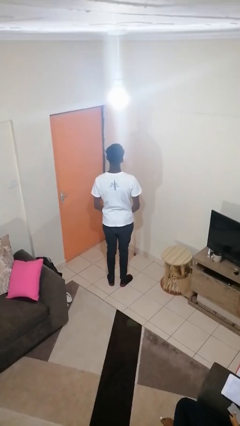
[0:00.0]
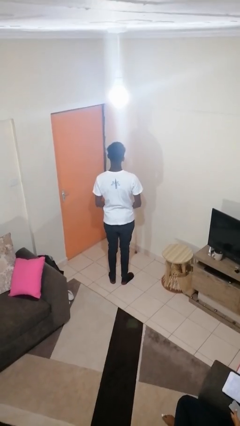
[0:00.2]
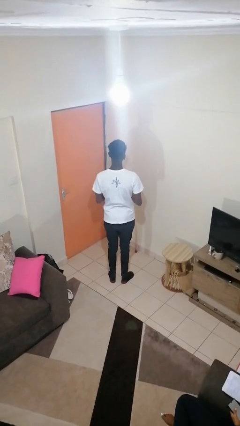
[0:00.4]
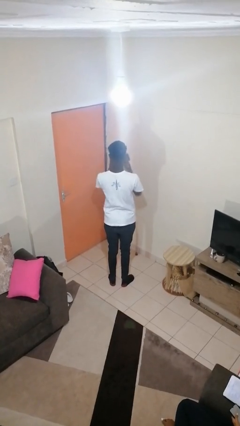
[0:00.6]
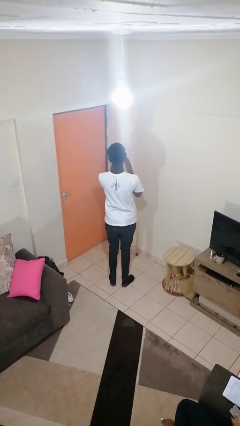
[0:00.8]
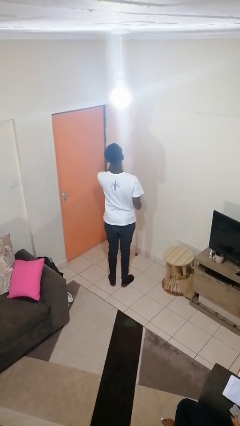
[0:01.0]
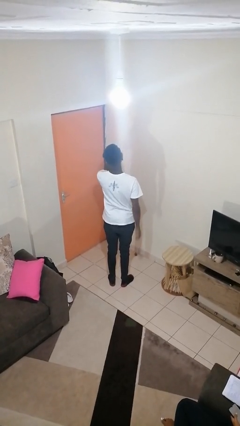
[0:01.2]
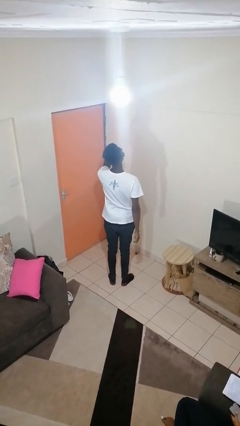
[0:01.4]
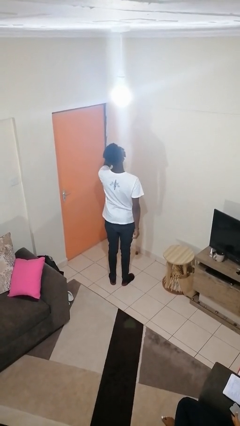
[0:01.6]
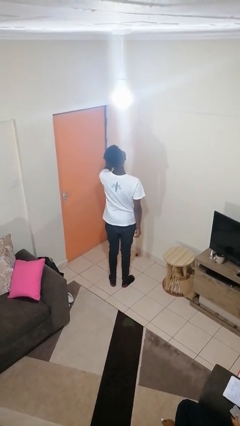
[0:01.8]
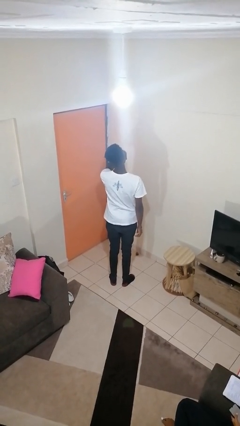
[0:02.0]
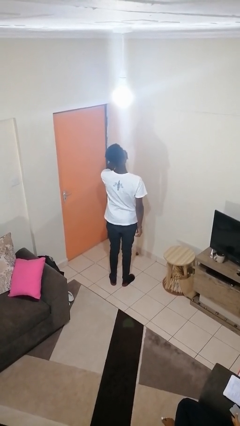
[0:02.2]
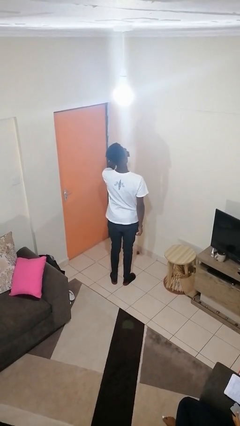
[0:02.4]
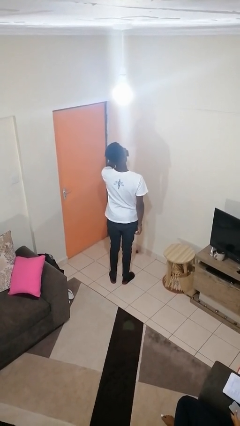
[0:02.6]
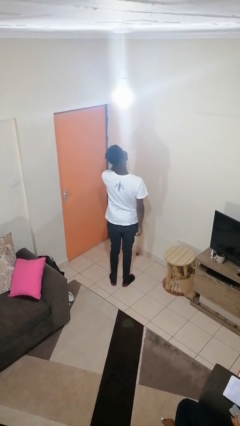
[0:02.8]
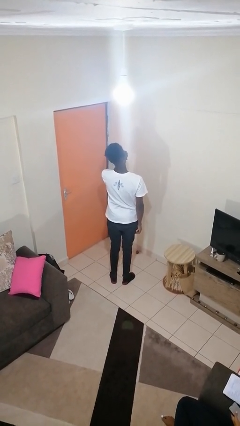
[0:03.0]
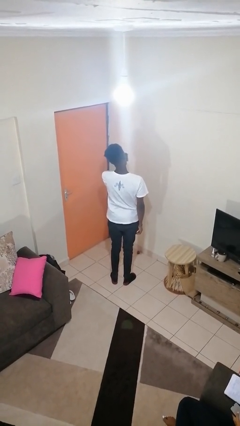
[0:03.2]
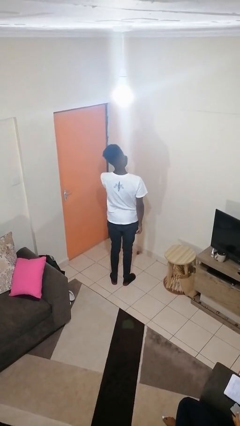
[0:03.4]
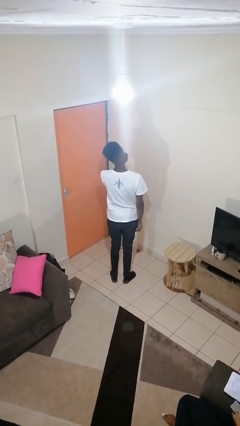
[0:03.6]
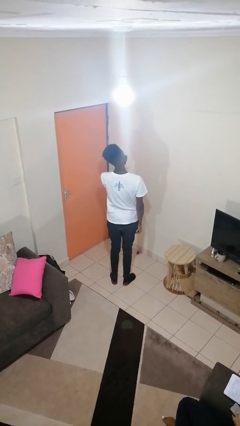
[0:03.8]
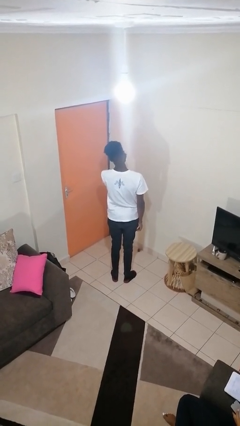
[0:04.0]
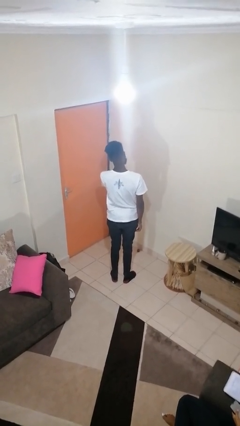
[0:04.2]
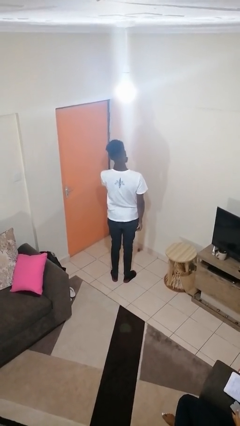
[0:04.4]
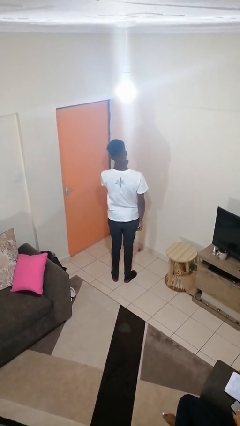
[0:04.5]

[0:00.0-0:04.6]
person blows nose

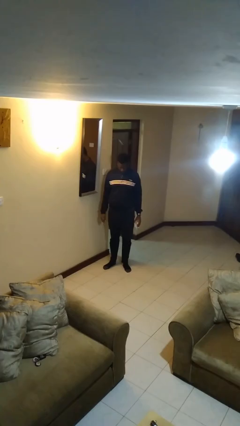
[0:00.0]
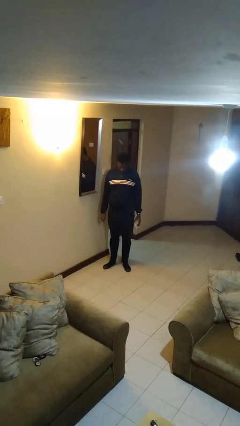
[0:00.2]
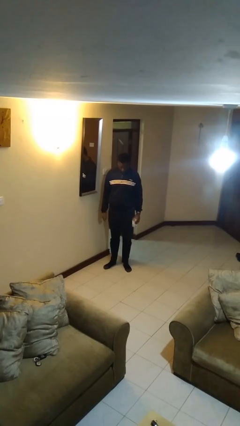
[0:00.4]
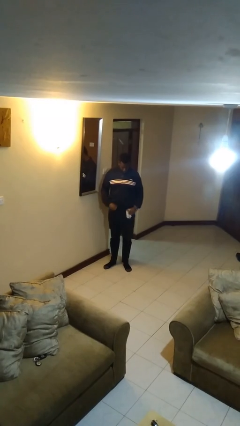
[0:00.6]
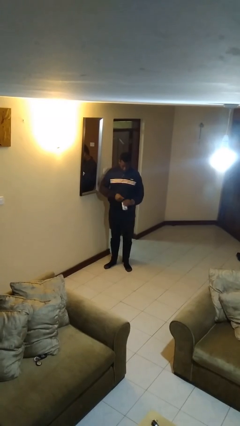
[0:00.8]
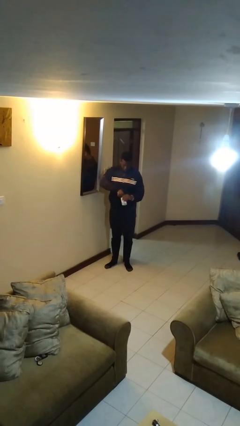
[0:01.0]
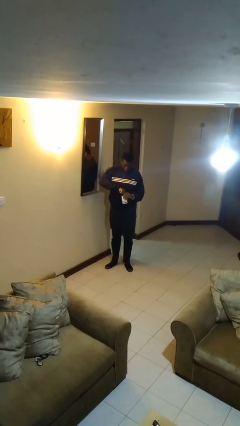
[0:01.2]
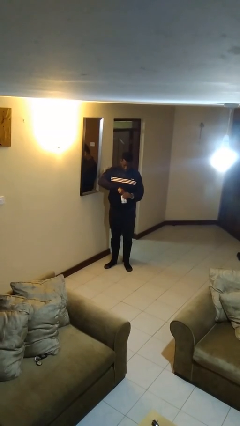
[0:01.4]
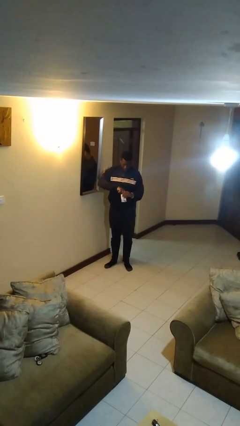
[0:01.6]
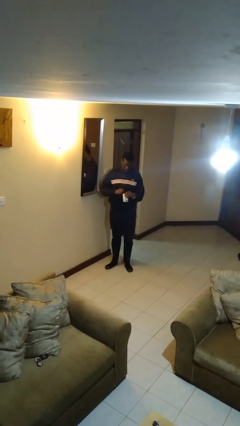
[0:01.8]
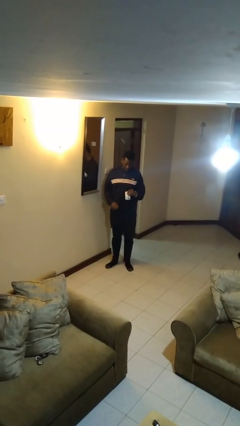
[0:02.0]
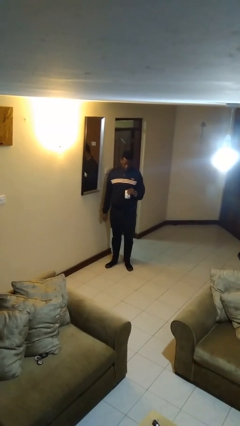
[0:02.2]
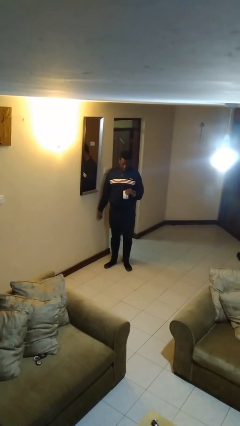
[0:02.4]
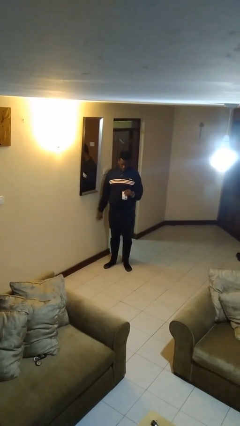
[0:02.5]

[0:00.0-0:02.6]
person opens beverage can

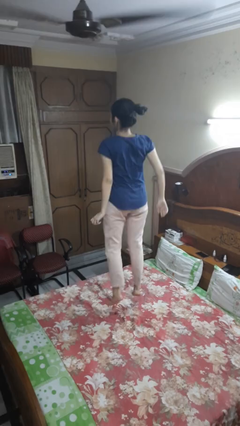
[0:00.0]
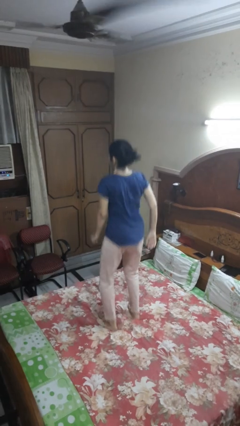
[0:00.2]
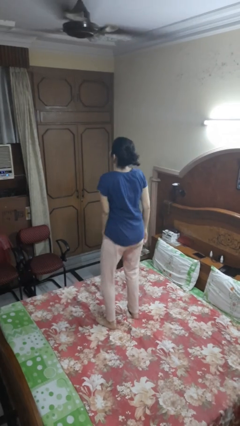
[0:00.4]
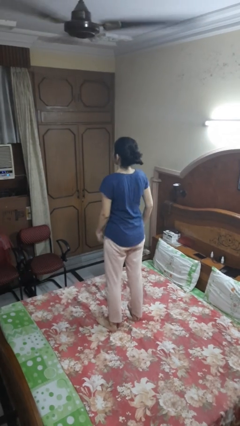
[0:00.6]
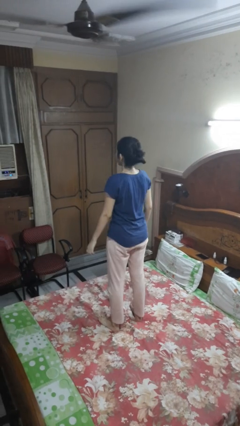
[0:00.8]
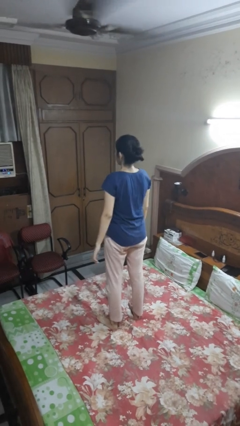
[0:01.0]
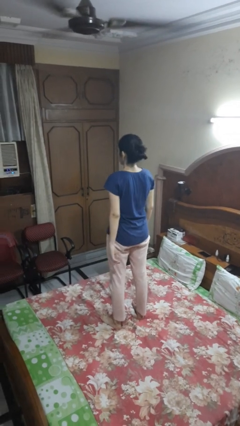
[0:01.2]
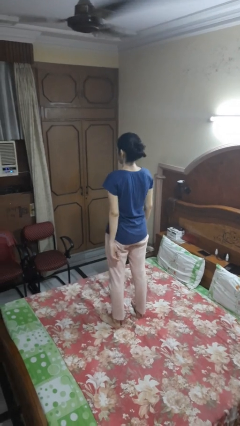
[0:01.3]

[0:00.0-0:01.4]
person jumps on bed

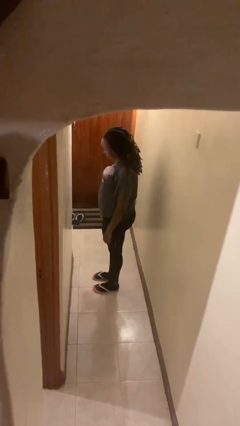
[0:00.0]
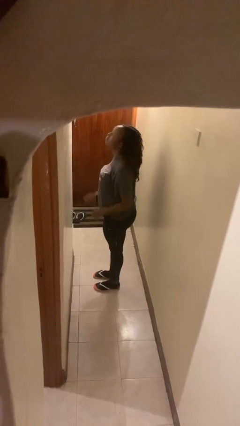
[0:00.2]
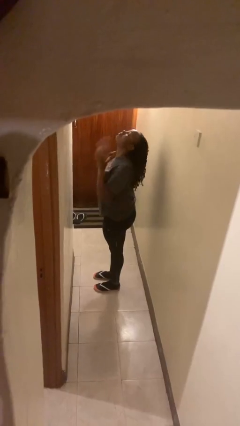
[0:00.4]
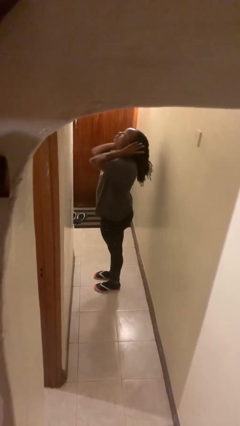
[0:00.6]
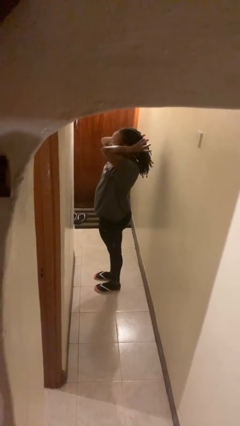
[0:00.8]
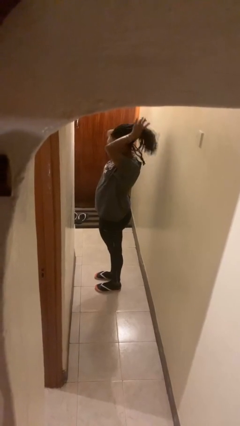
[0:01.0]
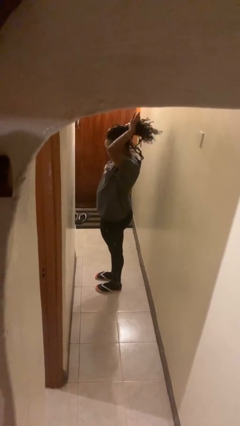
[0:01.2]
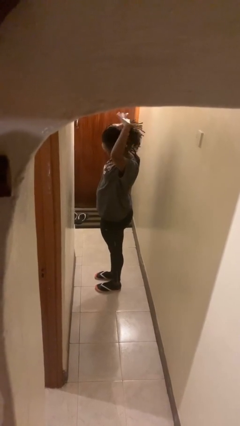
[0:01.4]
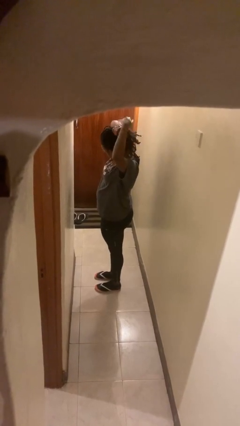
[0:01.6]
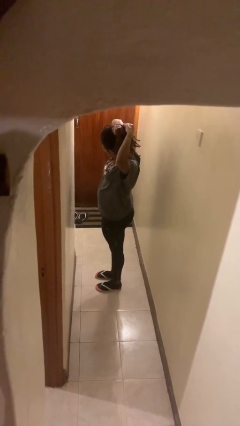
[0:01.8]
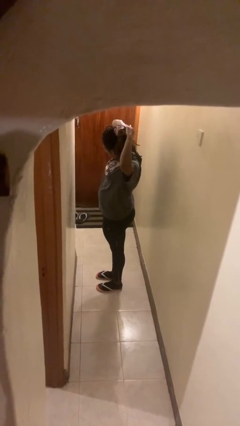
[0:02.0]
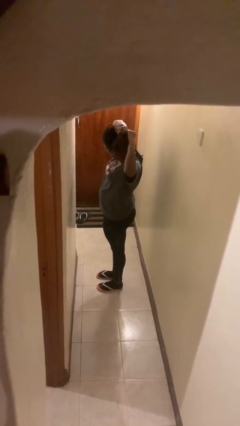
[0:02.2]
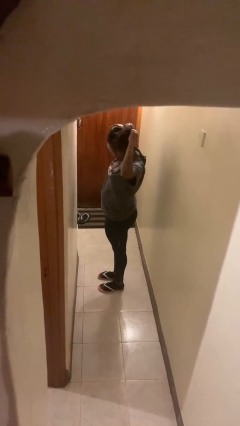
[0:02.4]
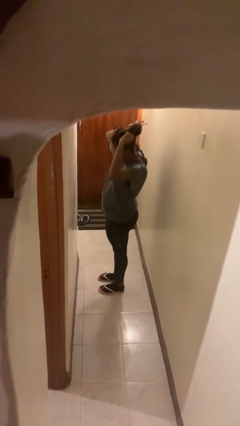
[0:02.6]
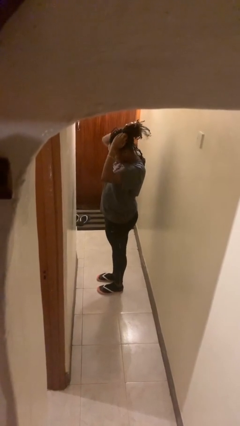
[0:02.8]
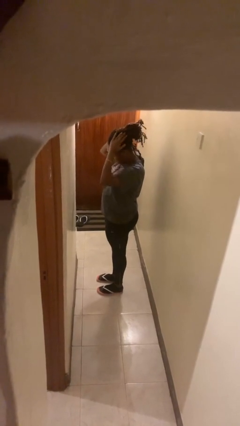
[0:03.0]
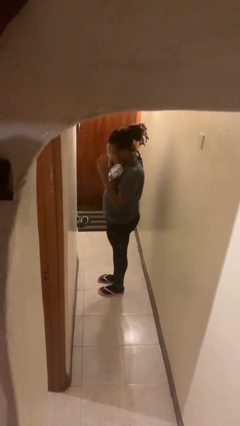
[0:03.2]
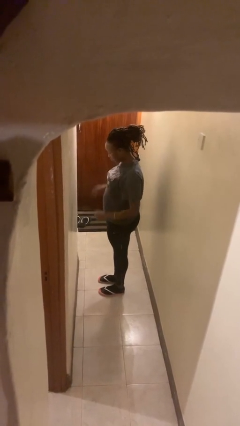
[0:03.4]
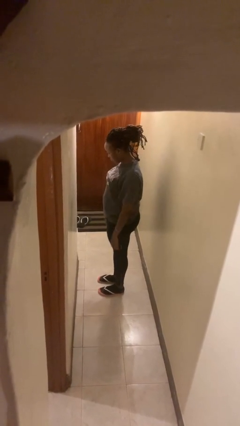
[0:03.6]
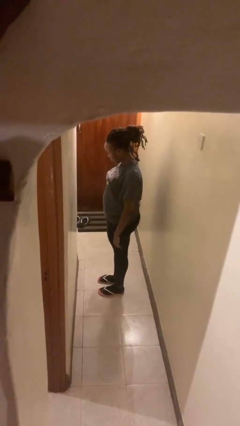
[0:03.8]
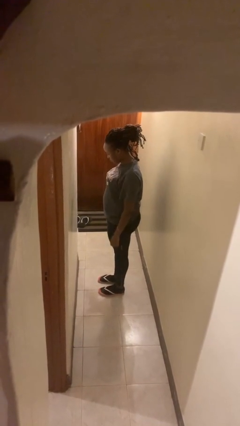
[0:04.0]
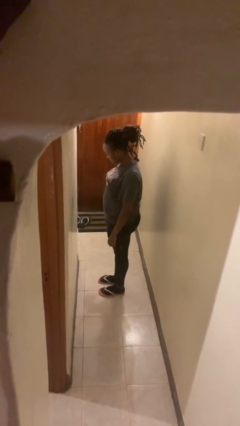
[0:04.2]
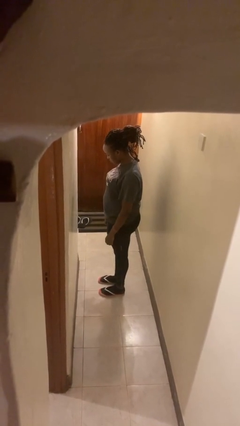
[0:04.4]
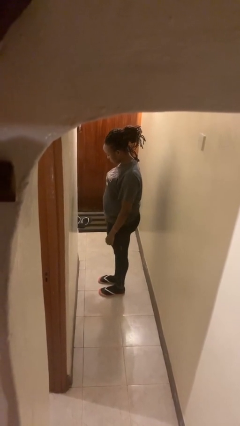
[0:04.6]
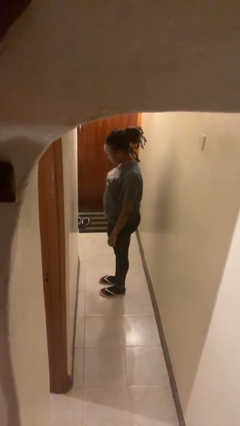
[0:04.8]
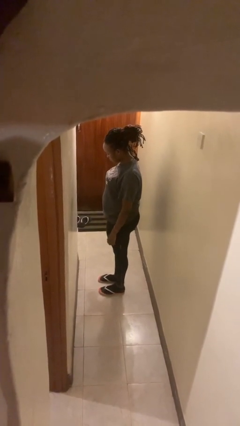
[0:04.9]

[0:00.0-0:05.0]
person puts hair in ponytail

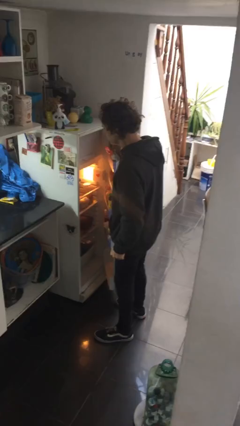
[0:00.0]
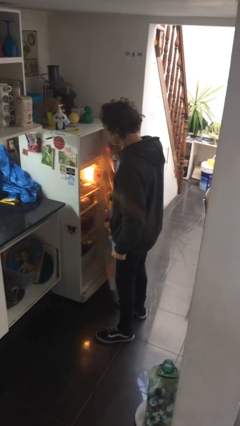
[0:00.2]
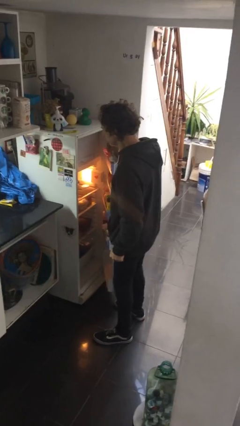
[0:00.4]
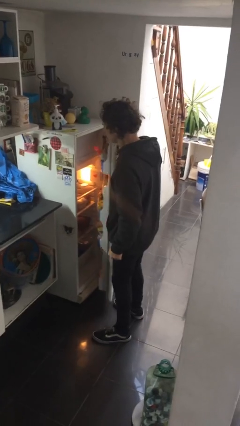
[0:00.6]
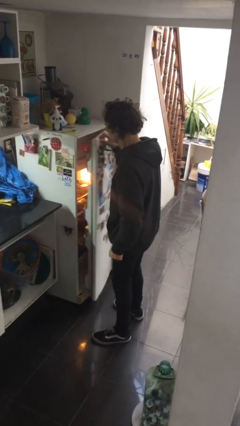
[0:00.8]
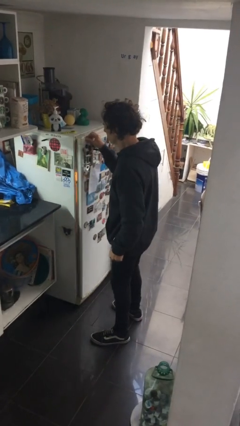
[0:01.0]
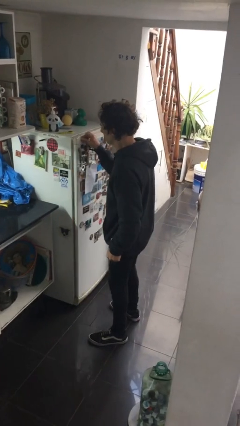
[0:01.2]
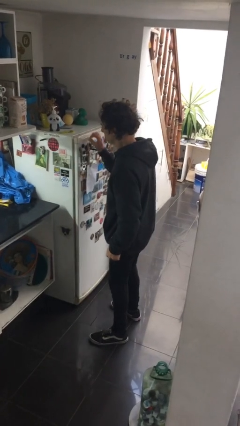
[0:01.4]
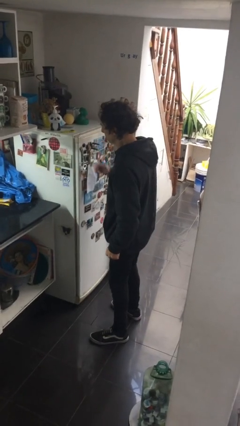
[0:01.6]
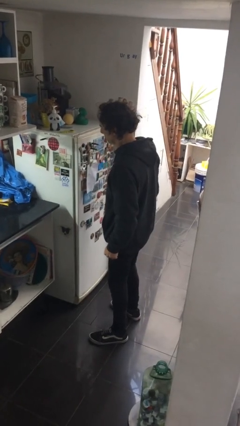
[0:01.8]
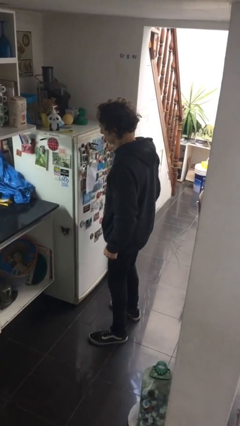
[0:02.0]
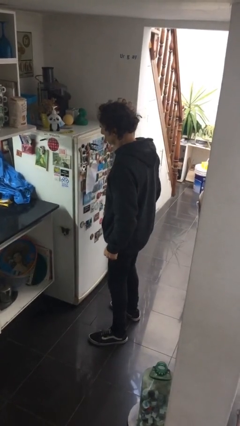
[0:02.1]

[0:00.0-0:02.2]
person closes refrigerator

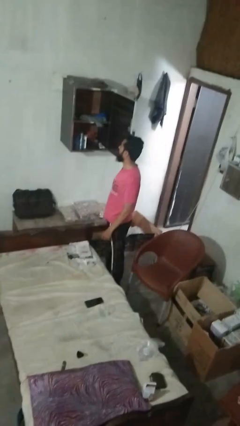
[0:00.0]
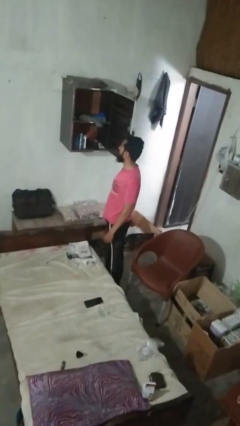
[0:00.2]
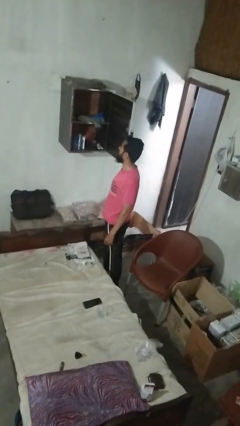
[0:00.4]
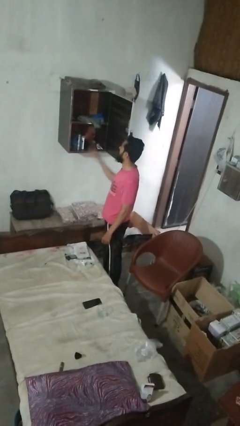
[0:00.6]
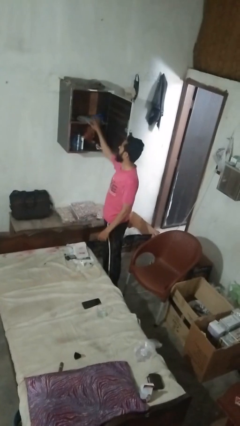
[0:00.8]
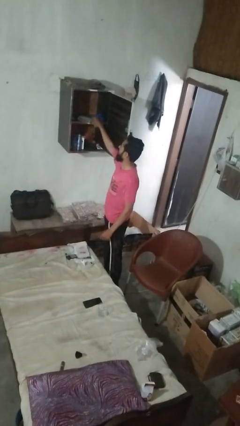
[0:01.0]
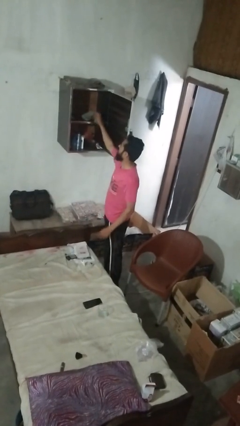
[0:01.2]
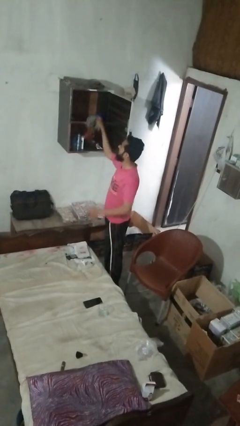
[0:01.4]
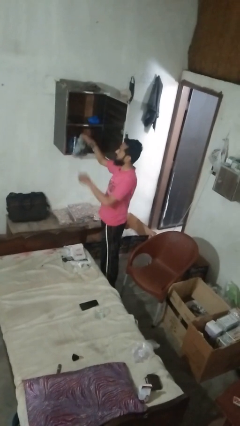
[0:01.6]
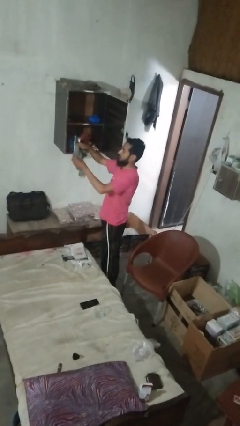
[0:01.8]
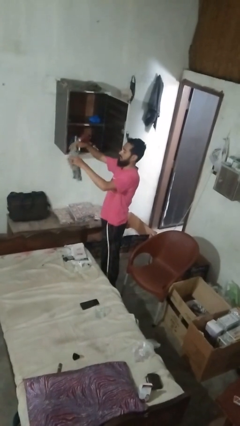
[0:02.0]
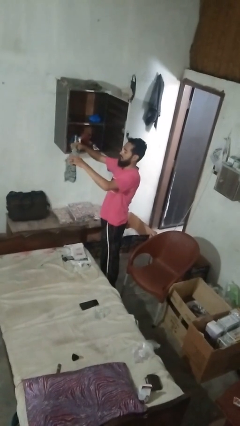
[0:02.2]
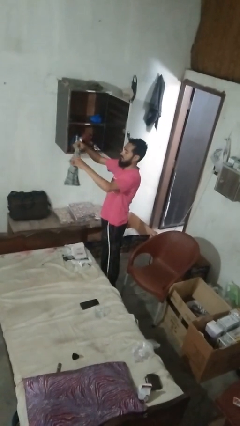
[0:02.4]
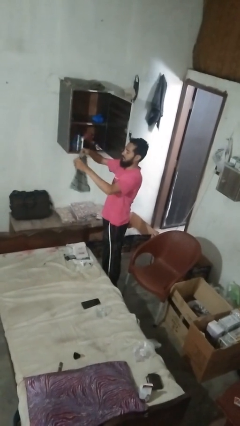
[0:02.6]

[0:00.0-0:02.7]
person takes clothes from dresser
